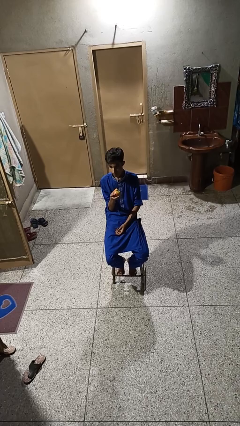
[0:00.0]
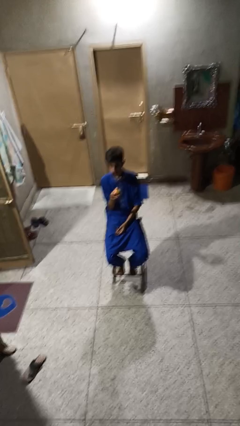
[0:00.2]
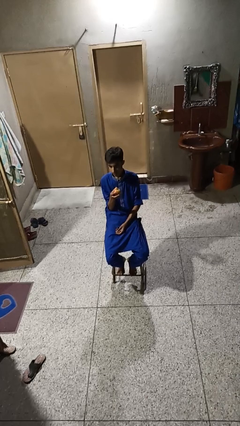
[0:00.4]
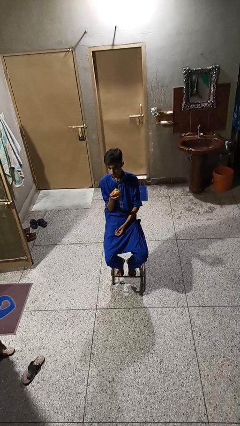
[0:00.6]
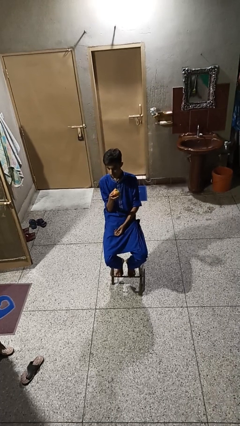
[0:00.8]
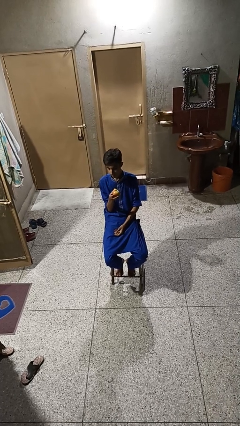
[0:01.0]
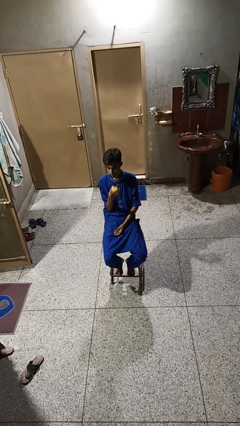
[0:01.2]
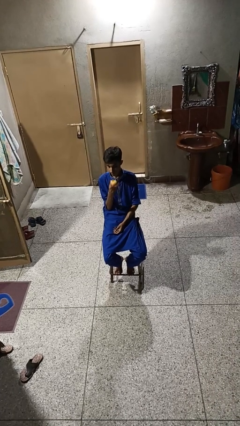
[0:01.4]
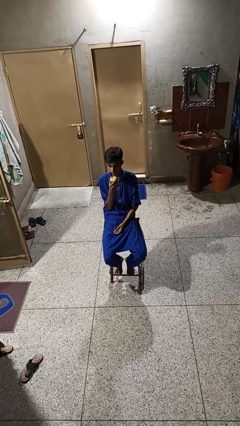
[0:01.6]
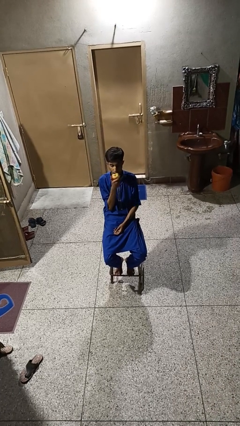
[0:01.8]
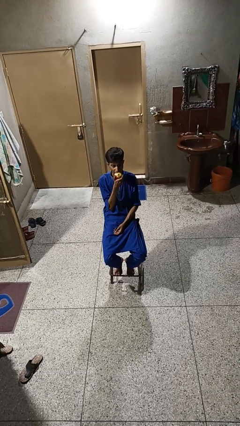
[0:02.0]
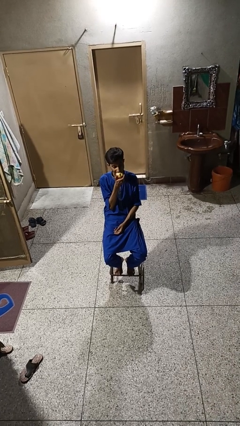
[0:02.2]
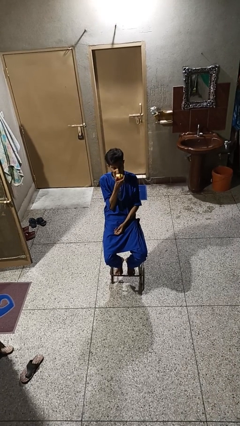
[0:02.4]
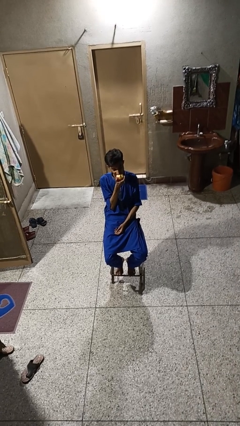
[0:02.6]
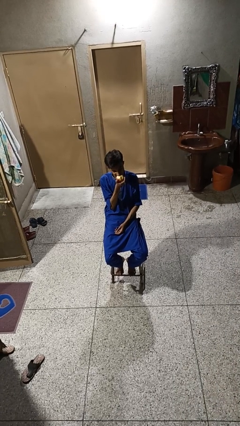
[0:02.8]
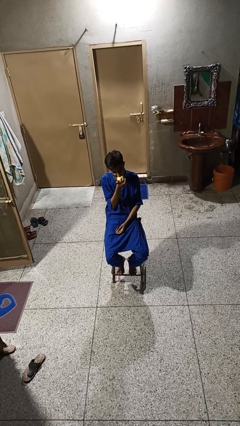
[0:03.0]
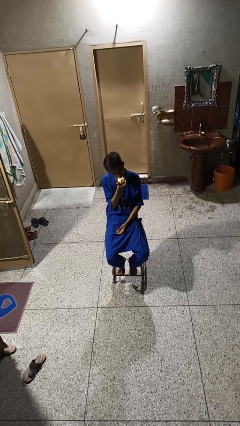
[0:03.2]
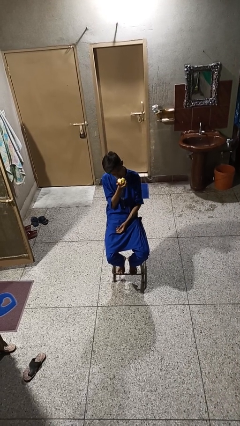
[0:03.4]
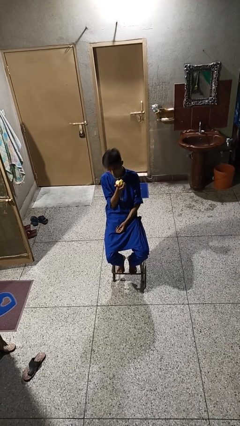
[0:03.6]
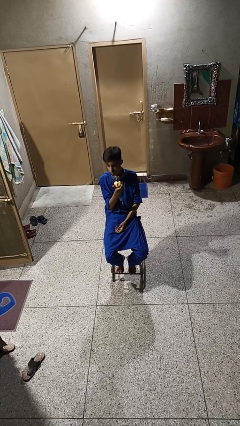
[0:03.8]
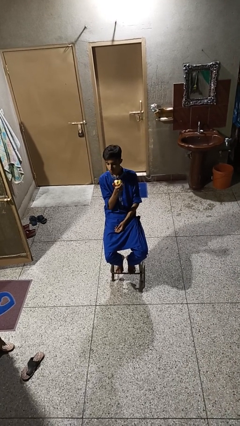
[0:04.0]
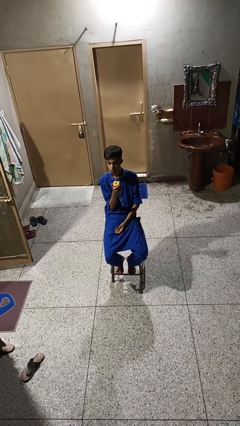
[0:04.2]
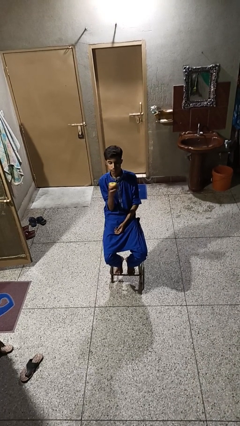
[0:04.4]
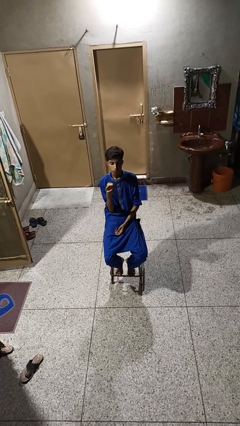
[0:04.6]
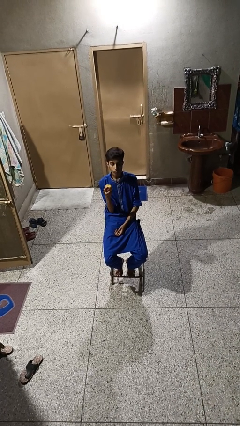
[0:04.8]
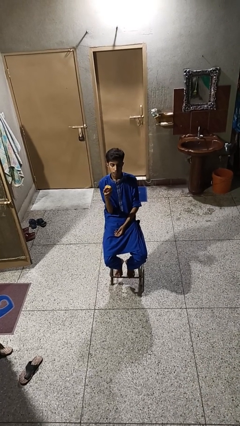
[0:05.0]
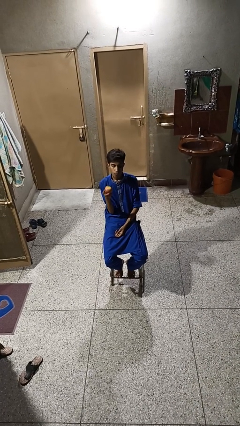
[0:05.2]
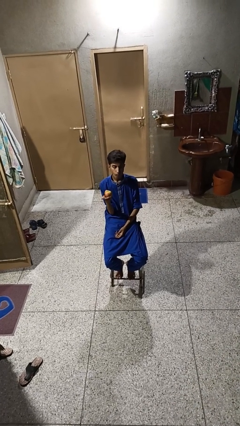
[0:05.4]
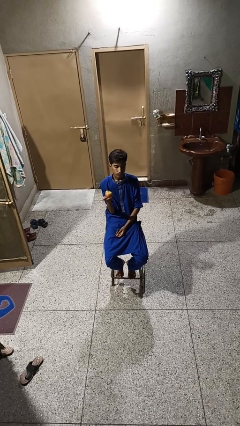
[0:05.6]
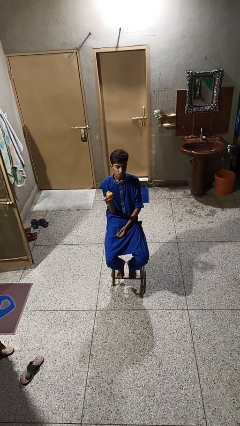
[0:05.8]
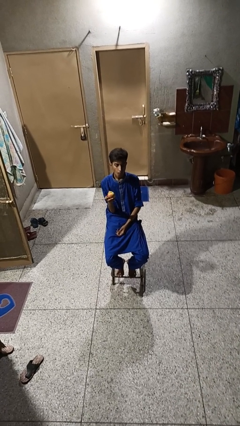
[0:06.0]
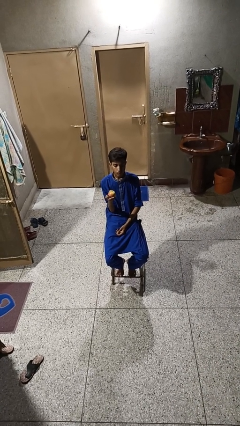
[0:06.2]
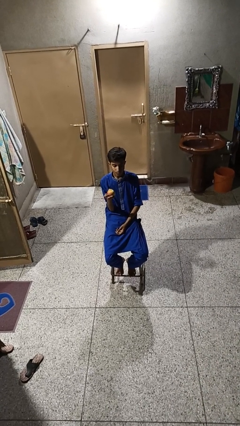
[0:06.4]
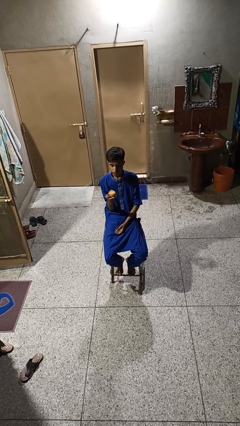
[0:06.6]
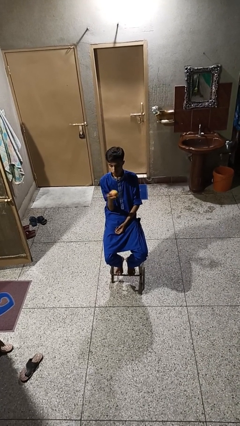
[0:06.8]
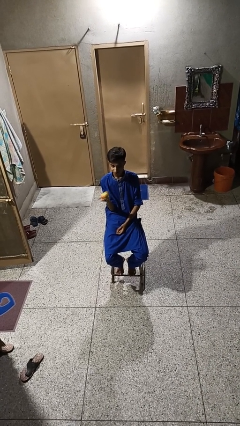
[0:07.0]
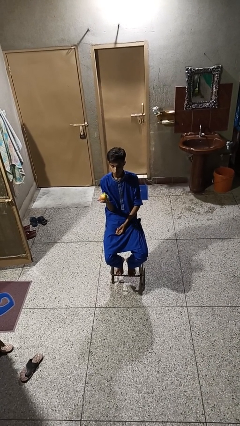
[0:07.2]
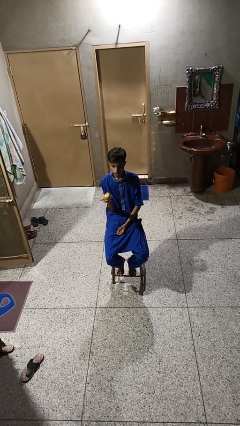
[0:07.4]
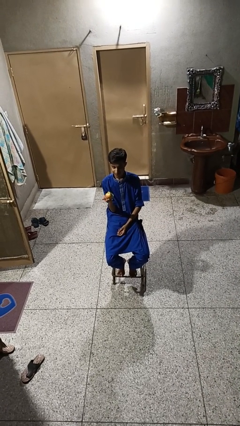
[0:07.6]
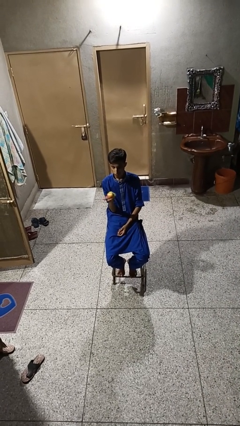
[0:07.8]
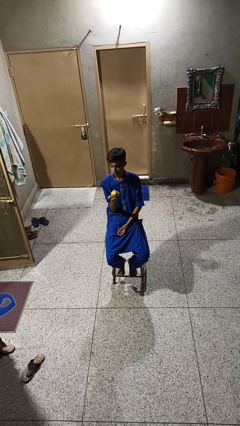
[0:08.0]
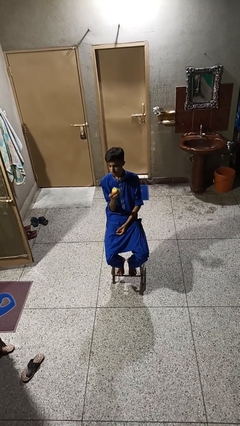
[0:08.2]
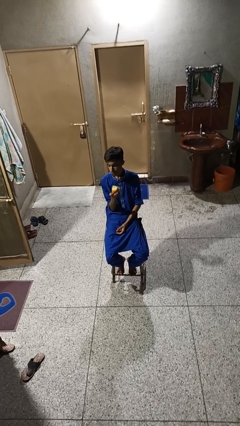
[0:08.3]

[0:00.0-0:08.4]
person eats apple

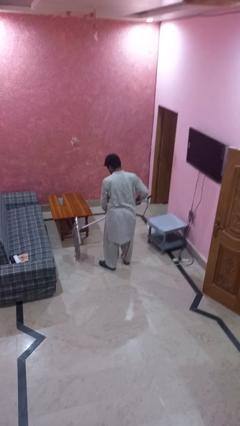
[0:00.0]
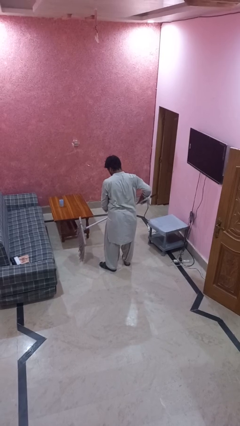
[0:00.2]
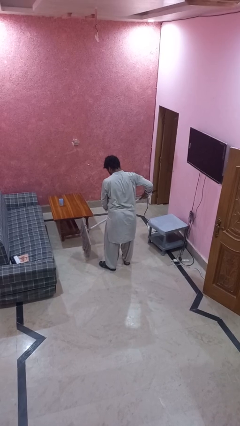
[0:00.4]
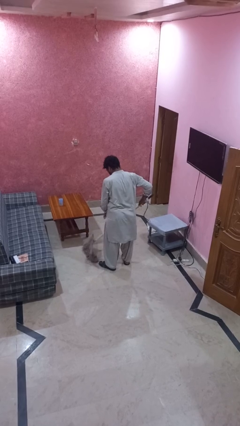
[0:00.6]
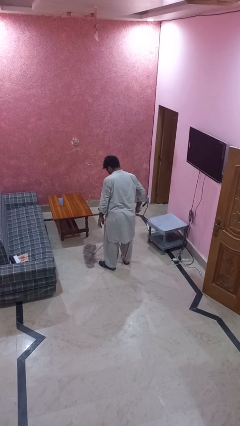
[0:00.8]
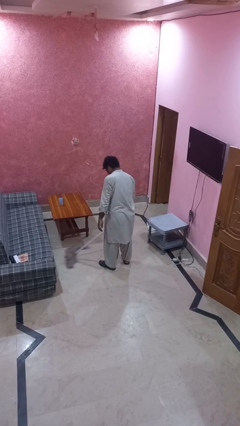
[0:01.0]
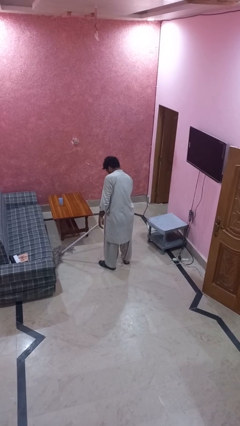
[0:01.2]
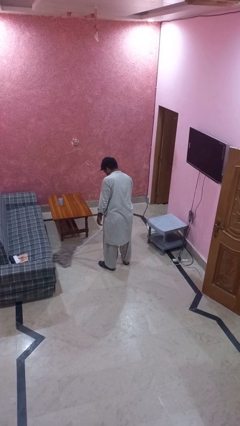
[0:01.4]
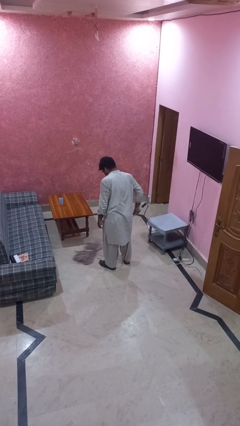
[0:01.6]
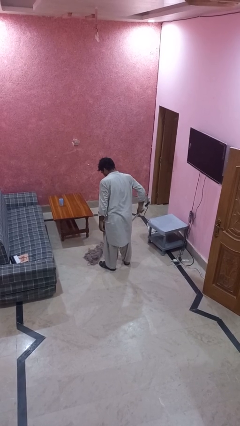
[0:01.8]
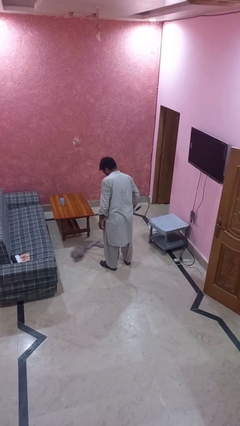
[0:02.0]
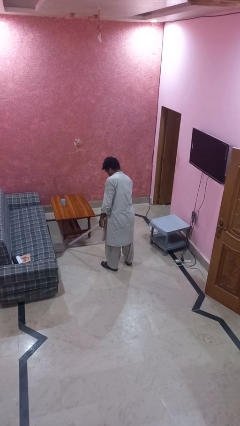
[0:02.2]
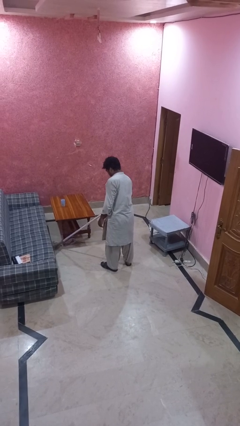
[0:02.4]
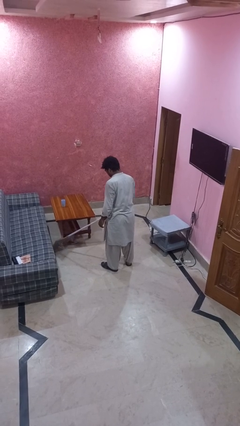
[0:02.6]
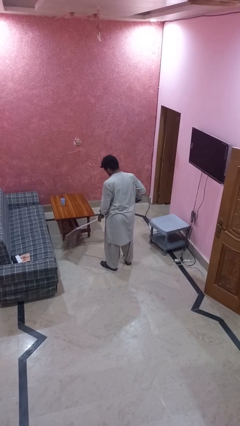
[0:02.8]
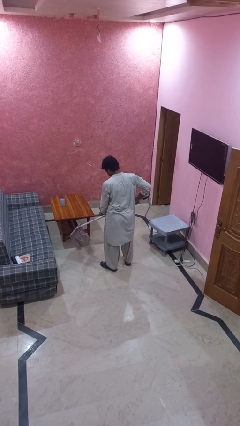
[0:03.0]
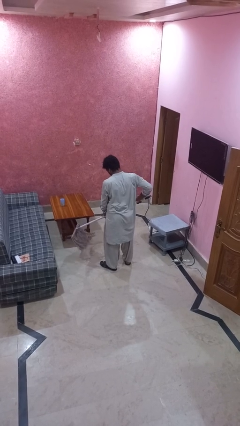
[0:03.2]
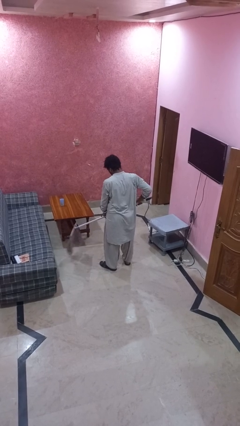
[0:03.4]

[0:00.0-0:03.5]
person mops

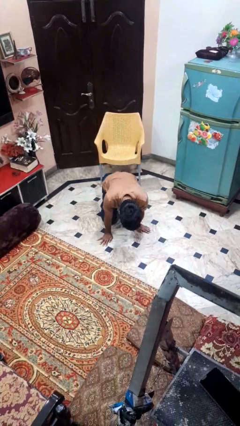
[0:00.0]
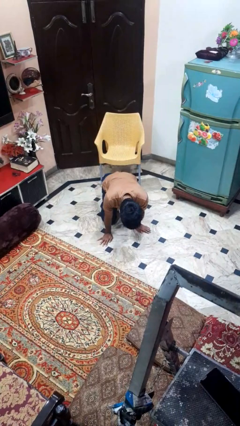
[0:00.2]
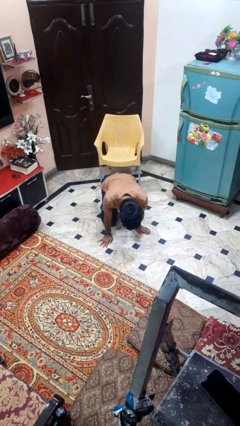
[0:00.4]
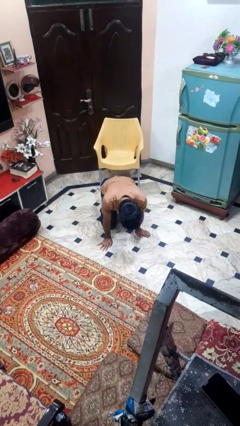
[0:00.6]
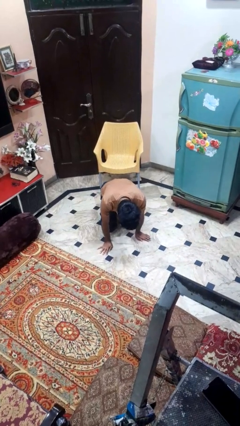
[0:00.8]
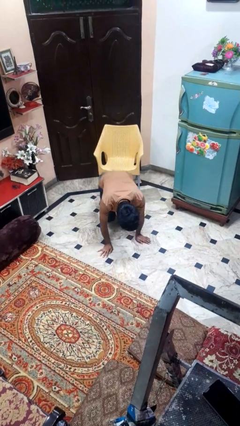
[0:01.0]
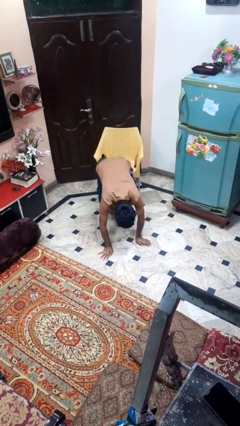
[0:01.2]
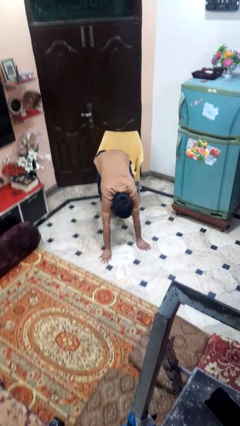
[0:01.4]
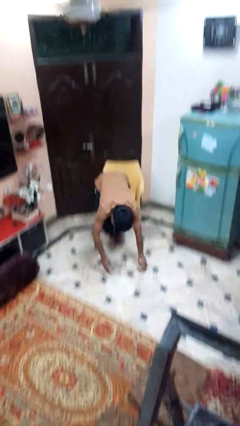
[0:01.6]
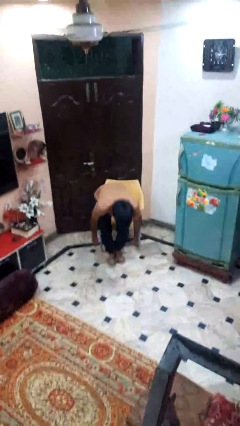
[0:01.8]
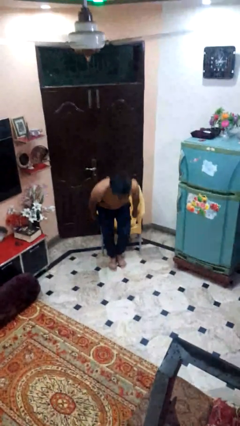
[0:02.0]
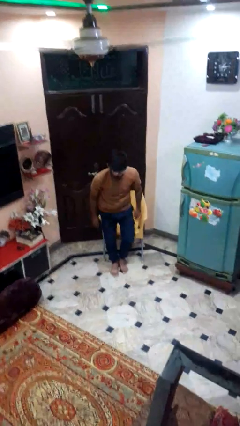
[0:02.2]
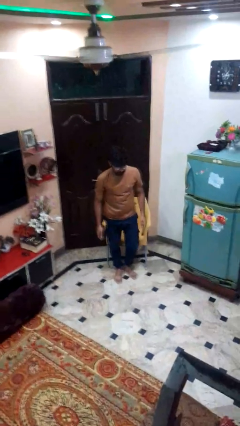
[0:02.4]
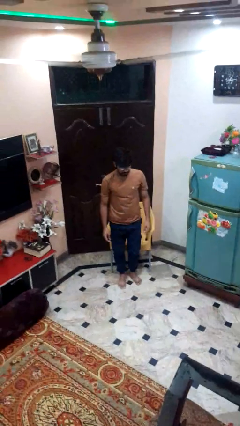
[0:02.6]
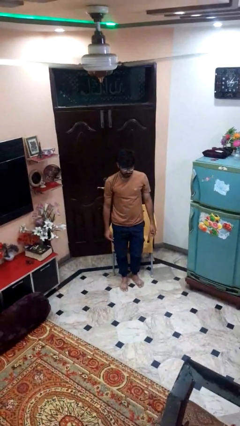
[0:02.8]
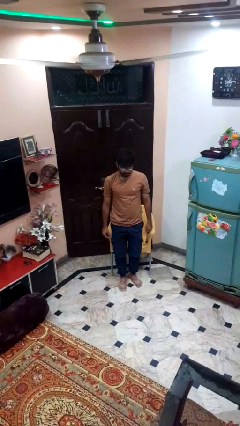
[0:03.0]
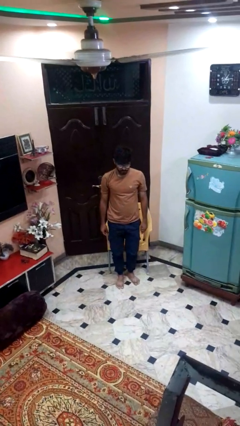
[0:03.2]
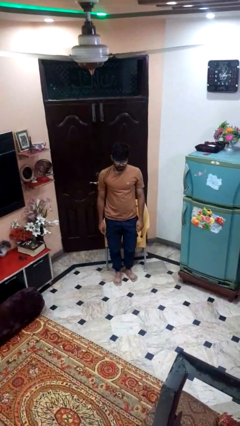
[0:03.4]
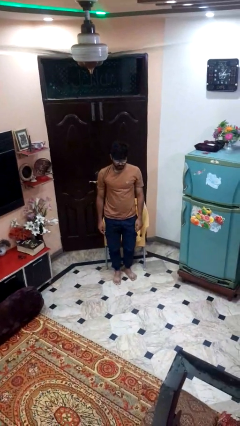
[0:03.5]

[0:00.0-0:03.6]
person stands up from floor

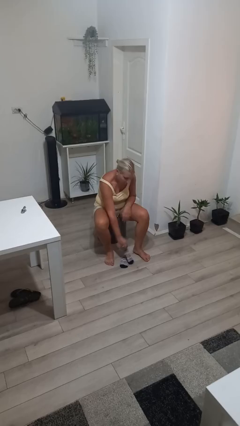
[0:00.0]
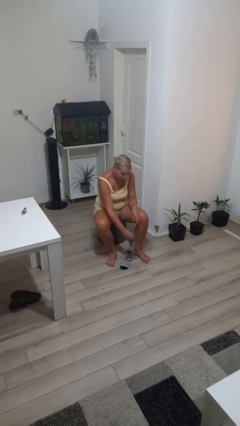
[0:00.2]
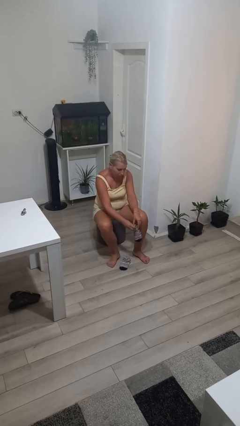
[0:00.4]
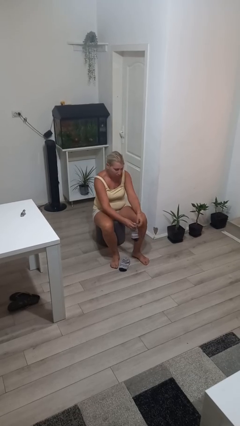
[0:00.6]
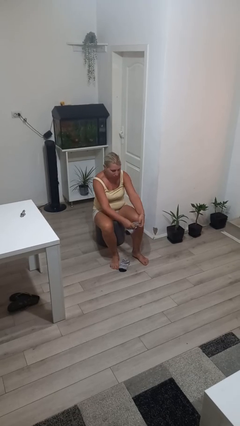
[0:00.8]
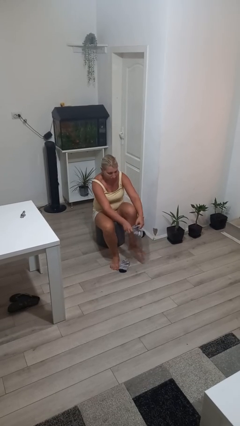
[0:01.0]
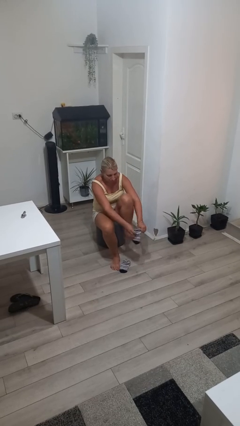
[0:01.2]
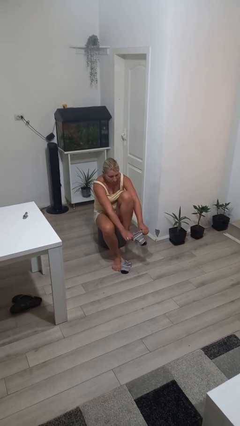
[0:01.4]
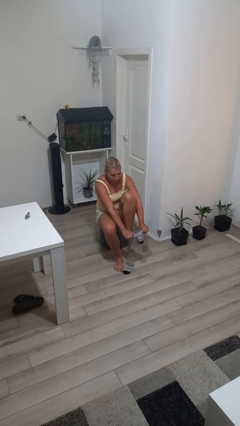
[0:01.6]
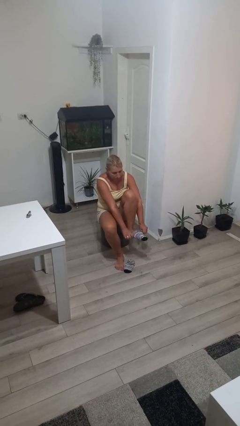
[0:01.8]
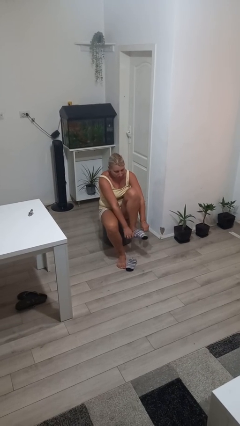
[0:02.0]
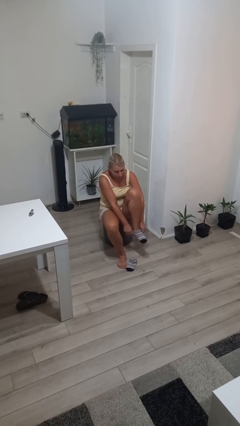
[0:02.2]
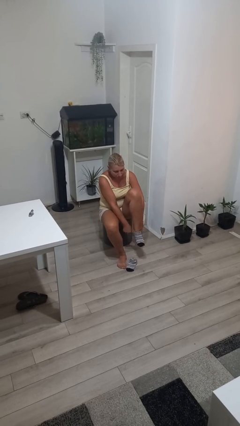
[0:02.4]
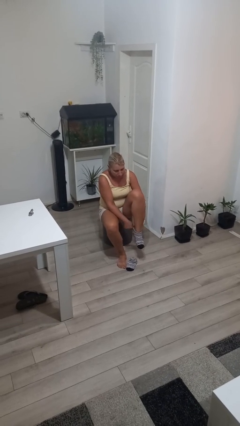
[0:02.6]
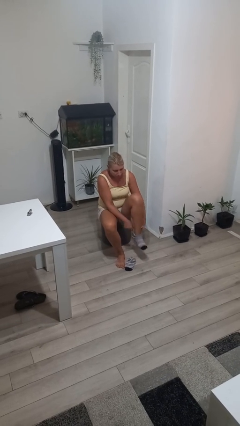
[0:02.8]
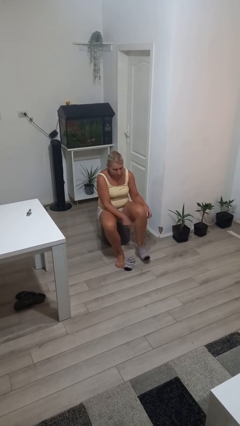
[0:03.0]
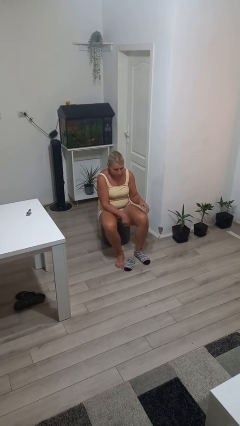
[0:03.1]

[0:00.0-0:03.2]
person puts on socks
